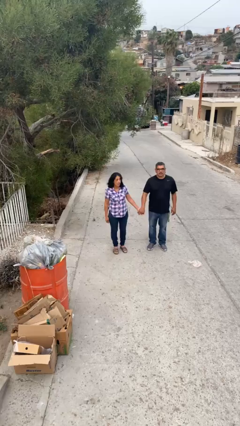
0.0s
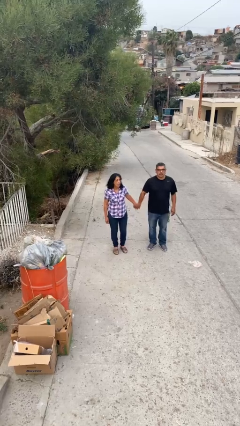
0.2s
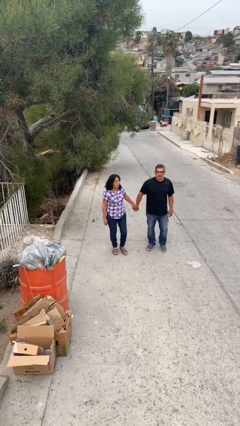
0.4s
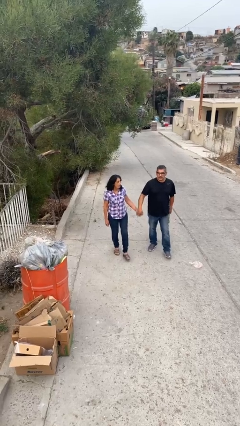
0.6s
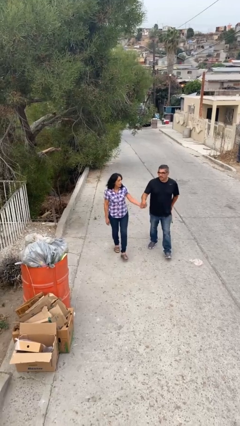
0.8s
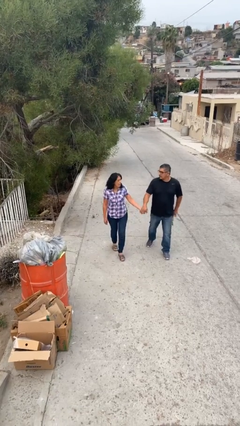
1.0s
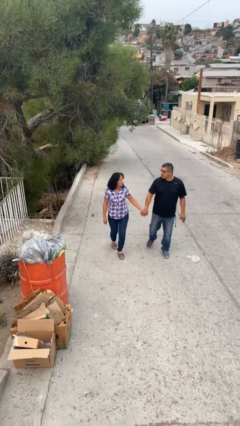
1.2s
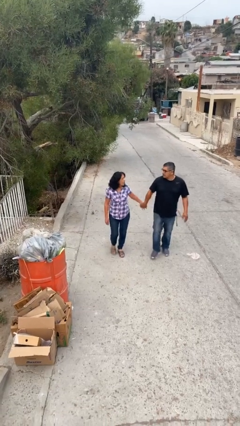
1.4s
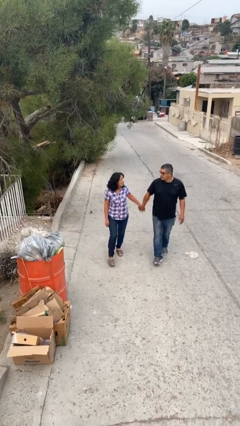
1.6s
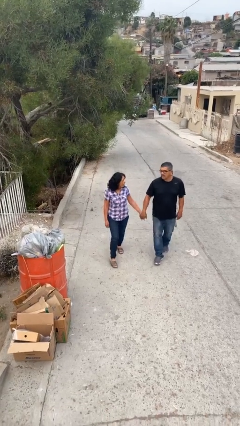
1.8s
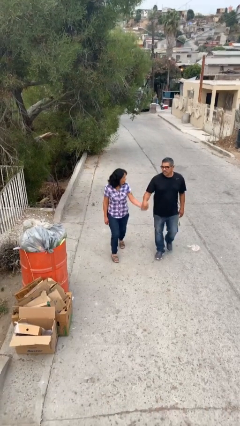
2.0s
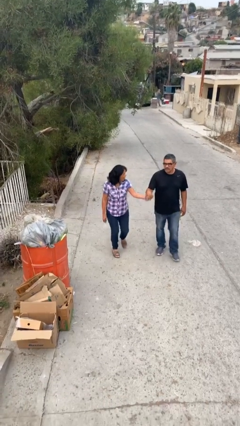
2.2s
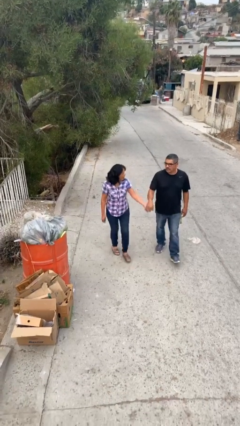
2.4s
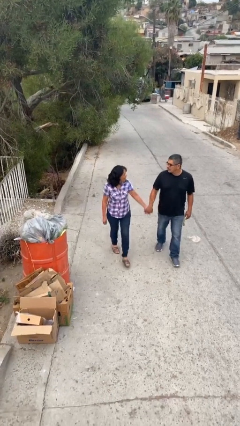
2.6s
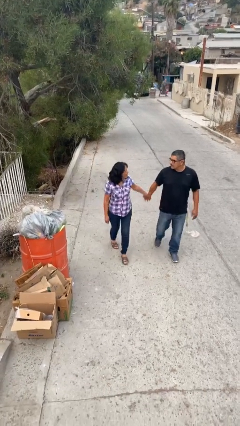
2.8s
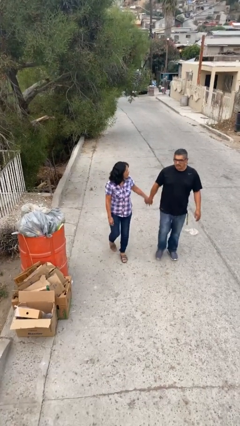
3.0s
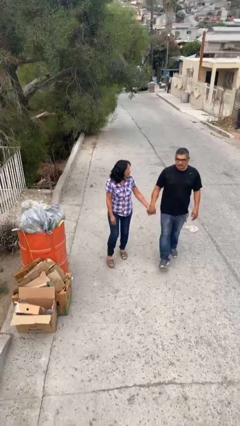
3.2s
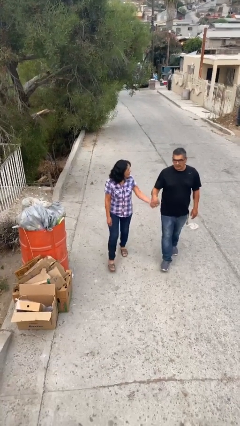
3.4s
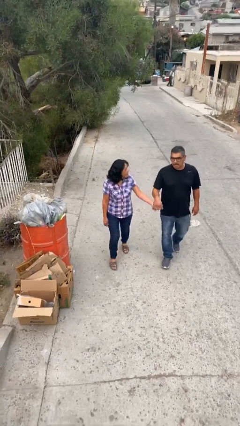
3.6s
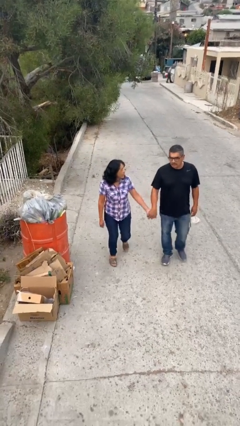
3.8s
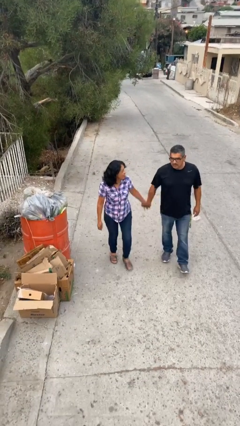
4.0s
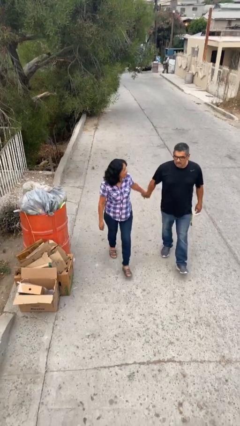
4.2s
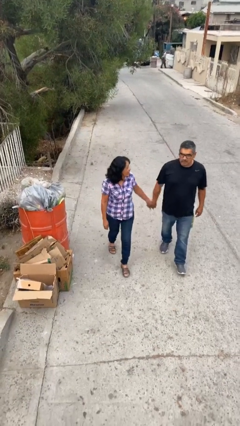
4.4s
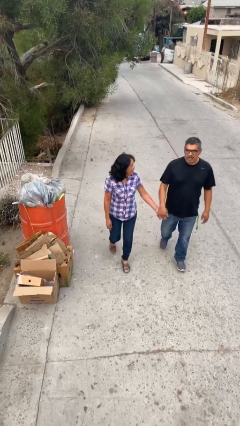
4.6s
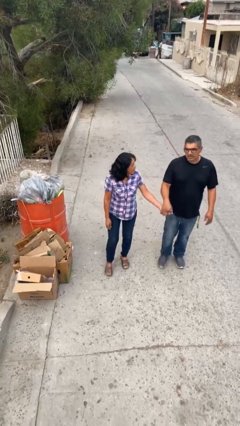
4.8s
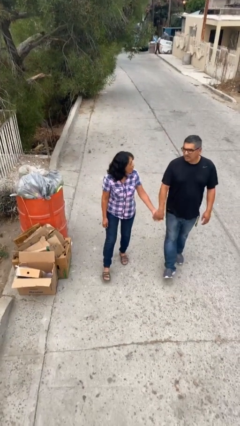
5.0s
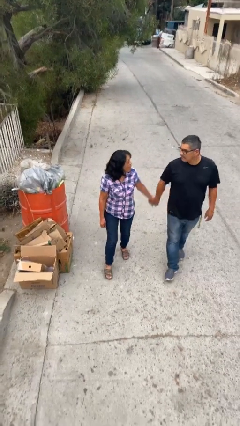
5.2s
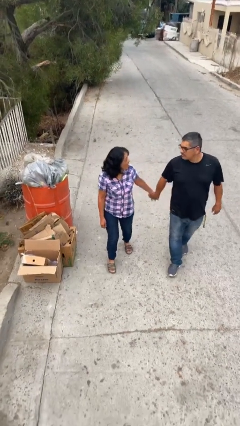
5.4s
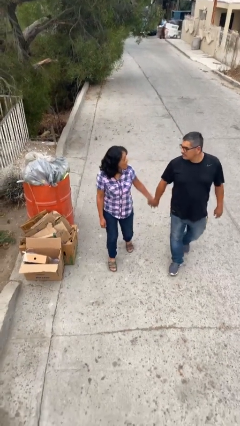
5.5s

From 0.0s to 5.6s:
person holds hand

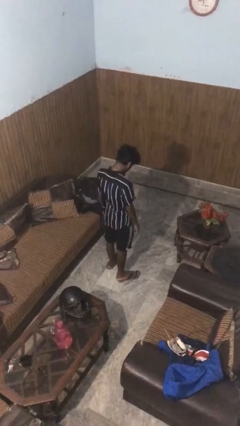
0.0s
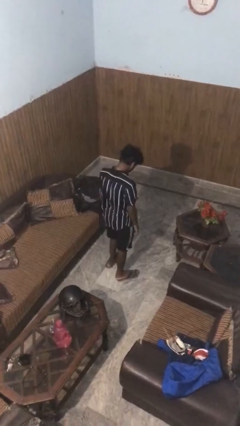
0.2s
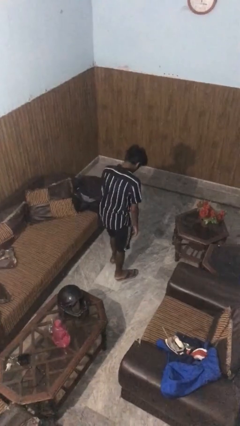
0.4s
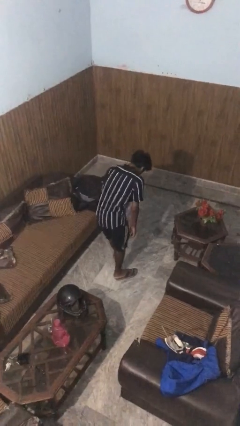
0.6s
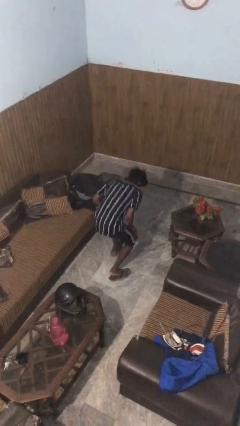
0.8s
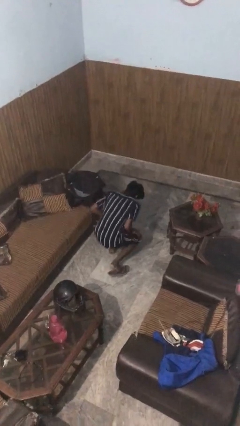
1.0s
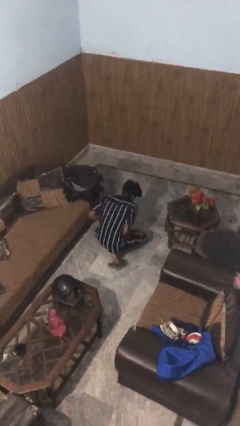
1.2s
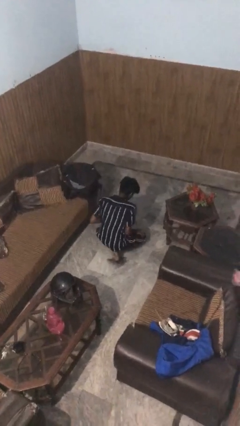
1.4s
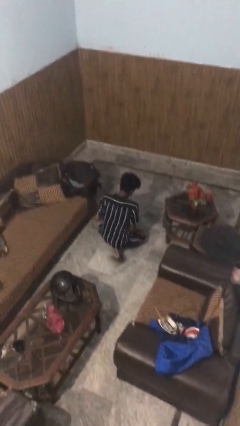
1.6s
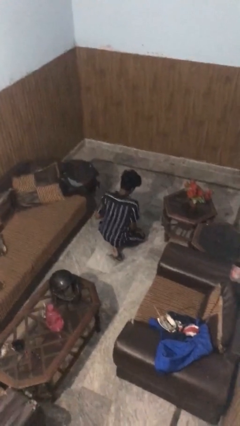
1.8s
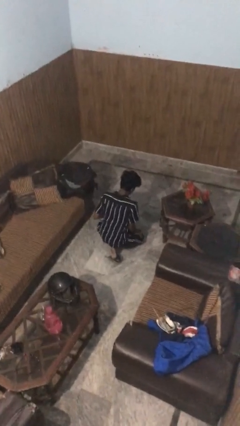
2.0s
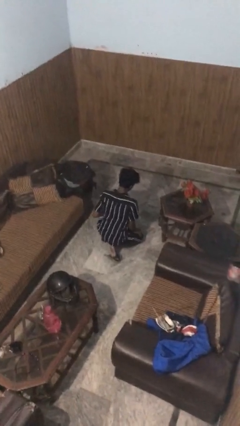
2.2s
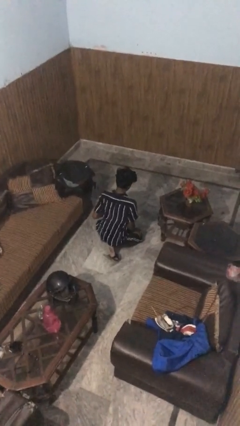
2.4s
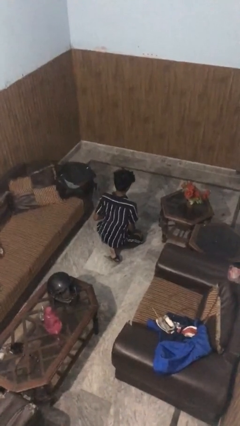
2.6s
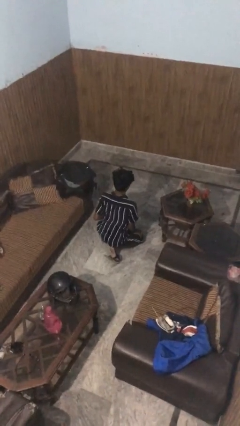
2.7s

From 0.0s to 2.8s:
person kneels

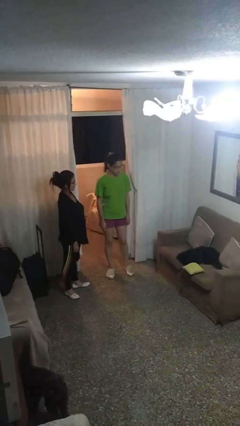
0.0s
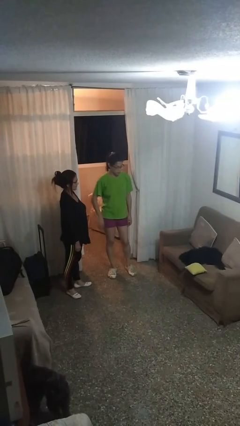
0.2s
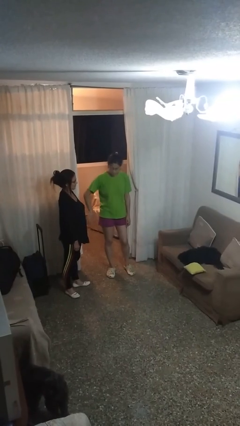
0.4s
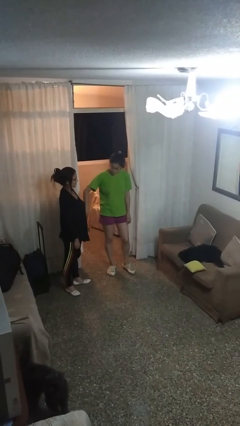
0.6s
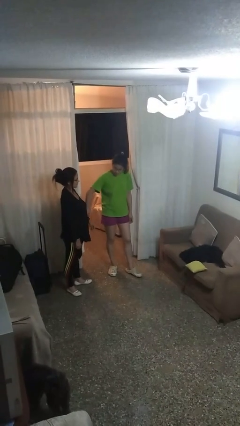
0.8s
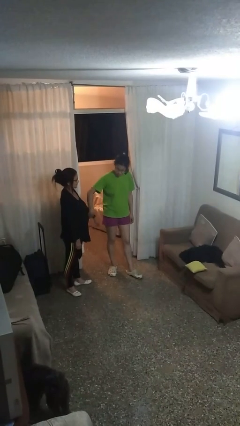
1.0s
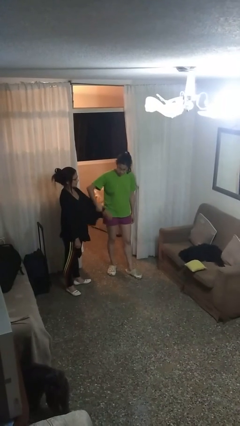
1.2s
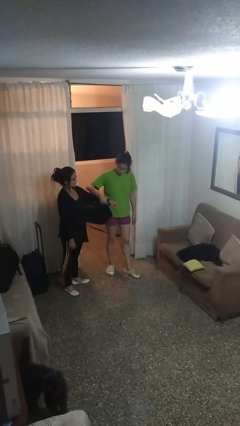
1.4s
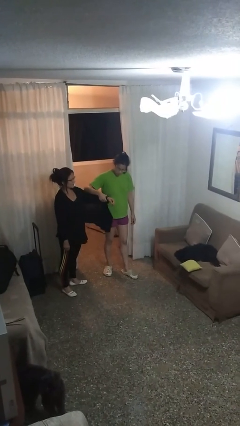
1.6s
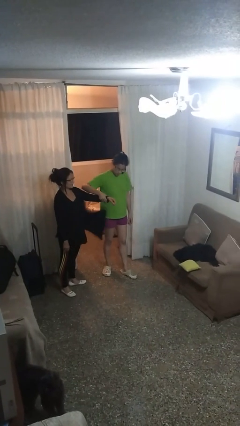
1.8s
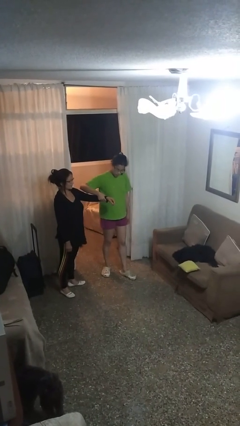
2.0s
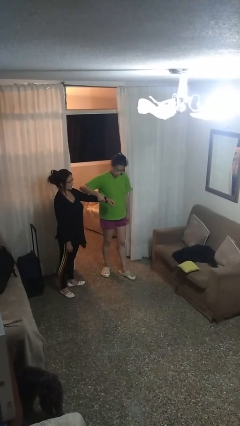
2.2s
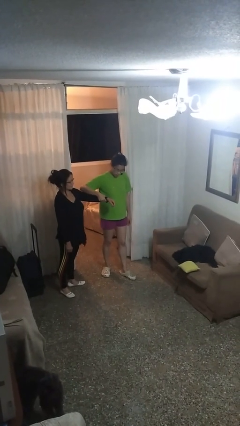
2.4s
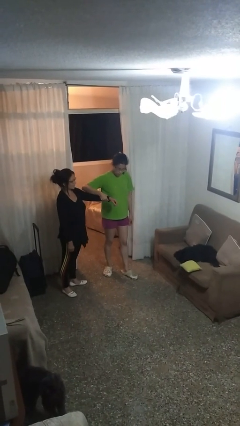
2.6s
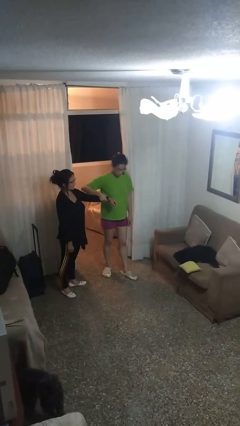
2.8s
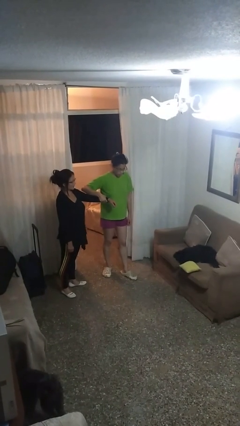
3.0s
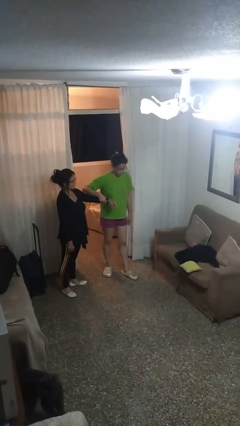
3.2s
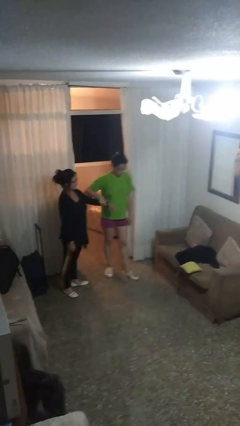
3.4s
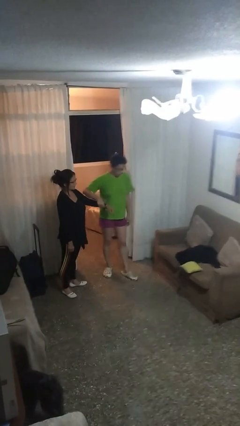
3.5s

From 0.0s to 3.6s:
person grabs person by forearm

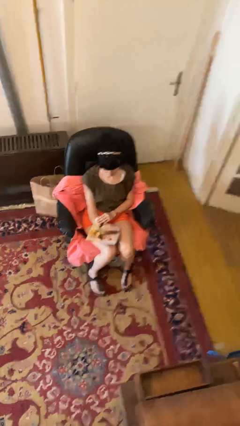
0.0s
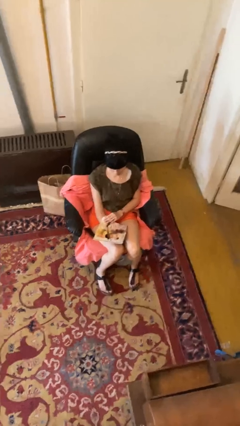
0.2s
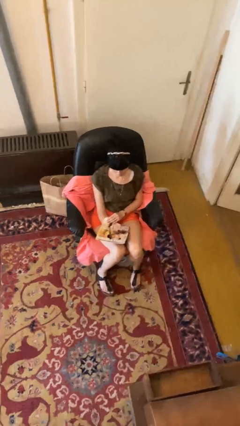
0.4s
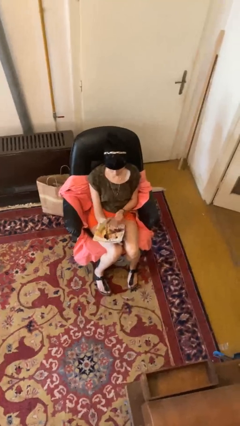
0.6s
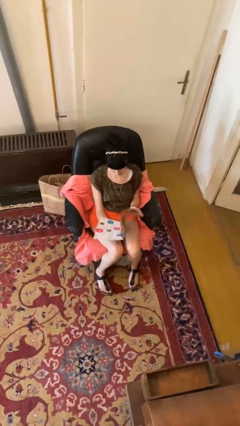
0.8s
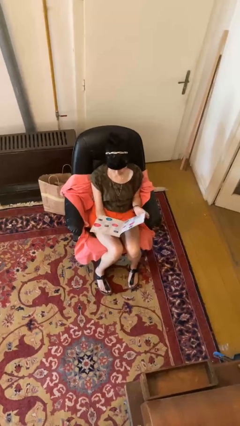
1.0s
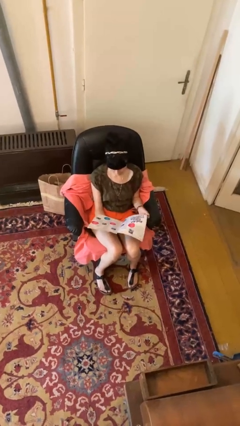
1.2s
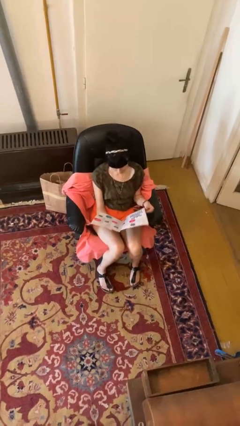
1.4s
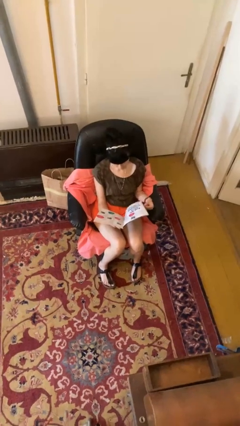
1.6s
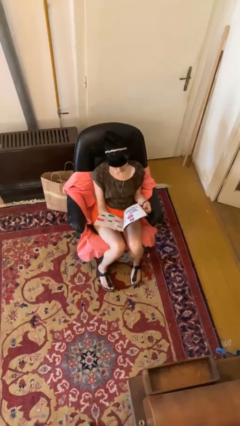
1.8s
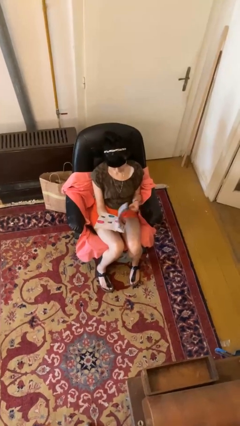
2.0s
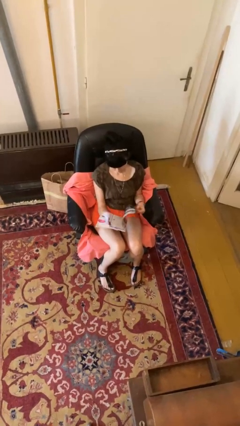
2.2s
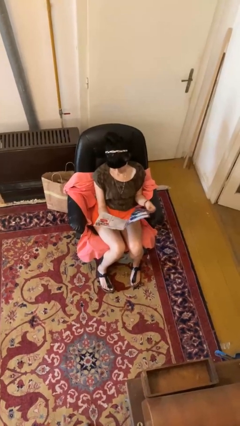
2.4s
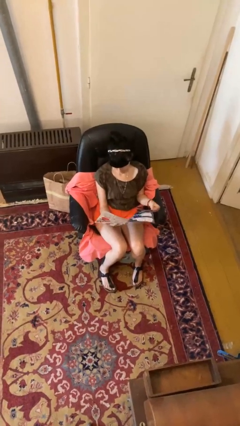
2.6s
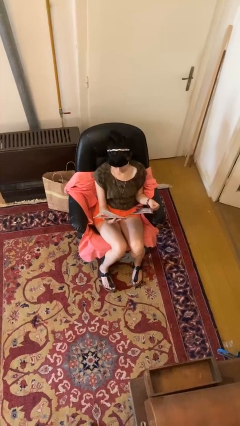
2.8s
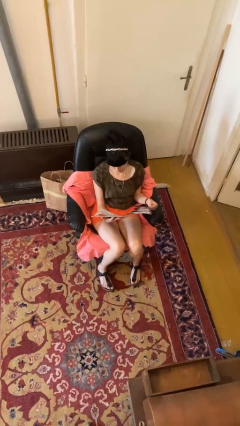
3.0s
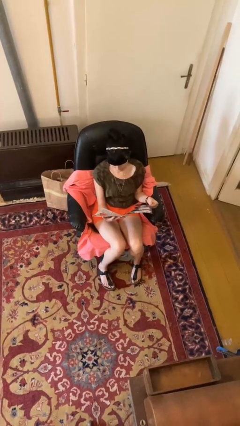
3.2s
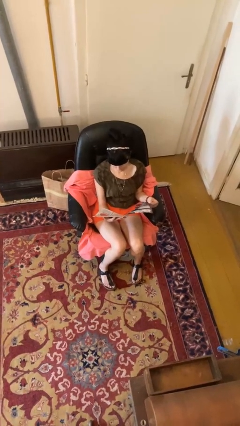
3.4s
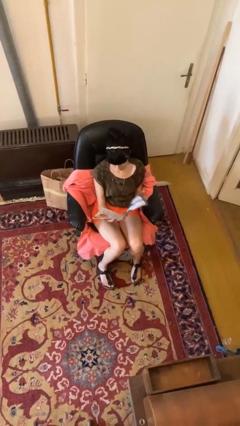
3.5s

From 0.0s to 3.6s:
person reads magazine

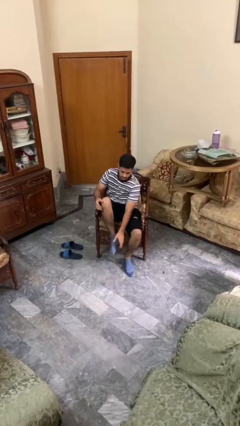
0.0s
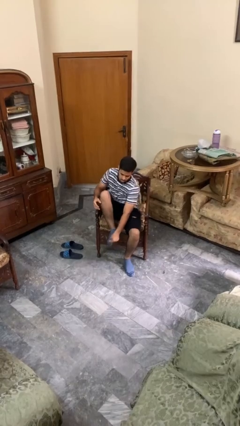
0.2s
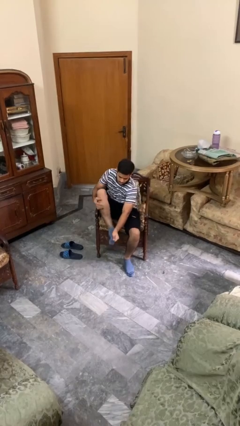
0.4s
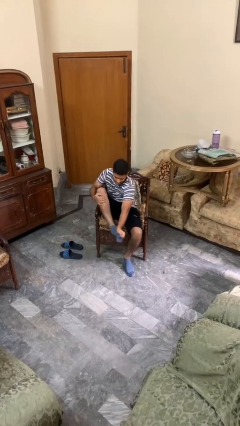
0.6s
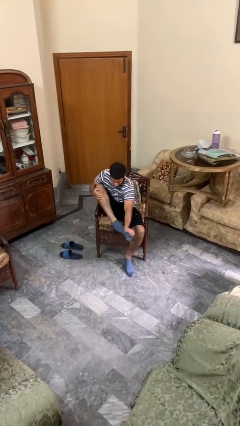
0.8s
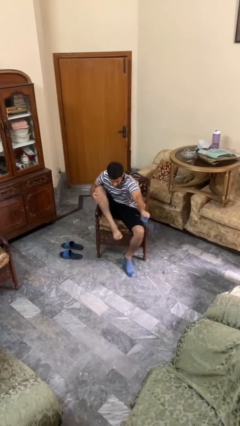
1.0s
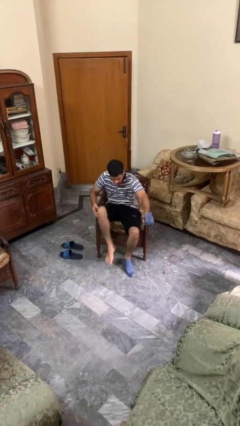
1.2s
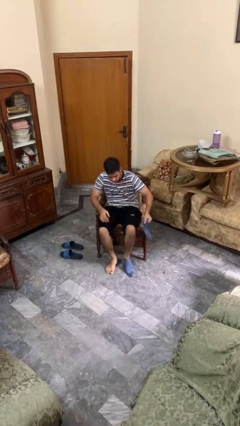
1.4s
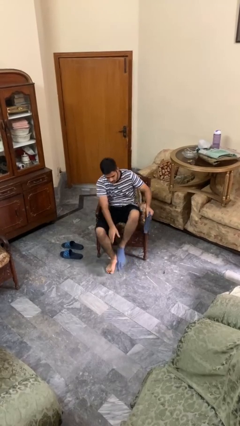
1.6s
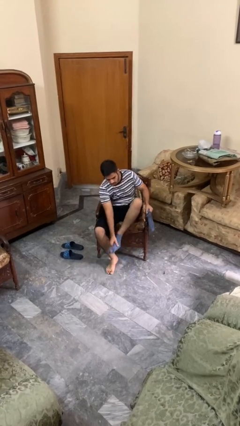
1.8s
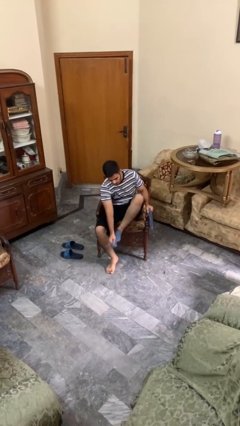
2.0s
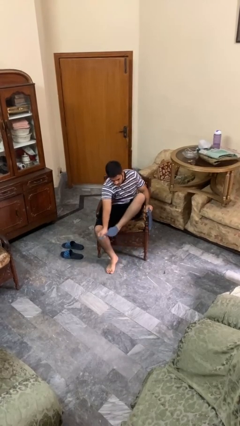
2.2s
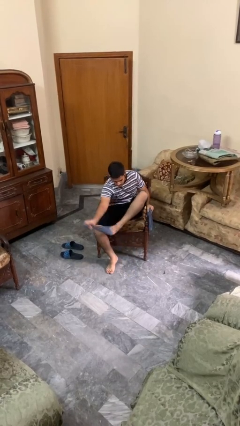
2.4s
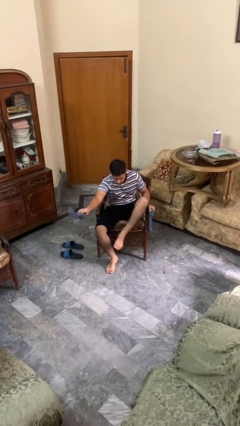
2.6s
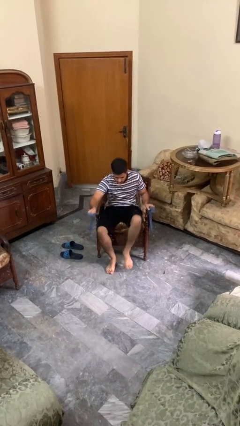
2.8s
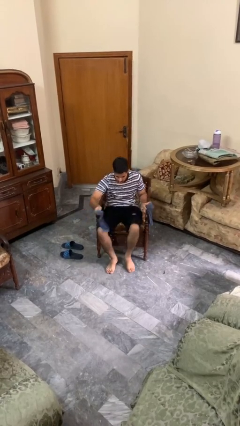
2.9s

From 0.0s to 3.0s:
person takes off socks
